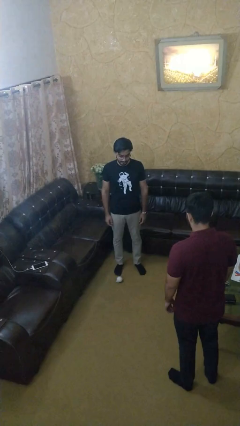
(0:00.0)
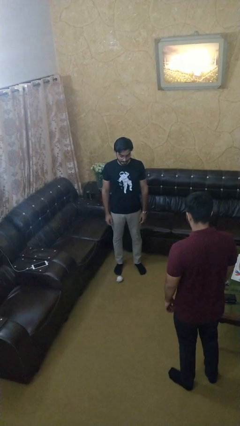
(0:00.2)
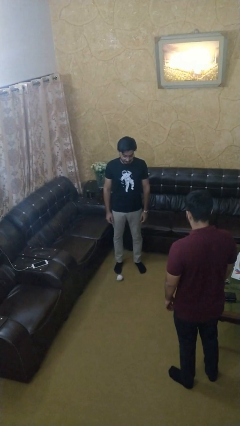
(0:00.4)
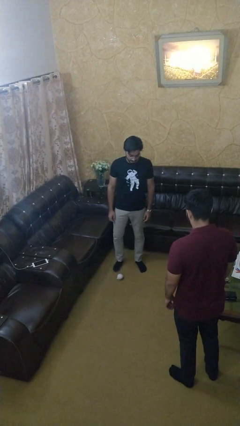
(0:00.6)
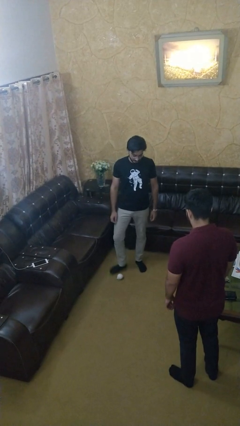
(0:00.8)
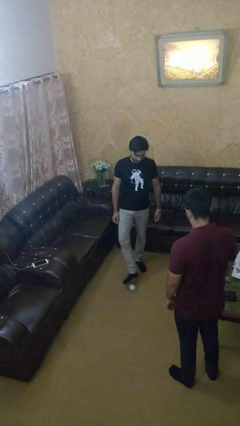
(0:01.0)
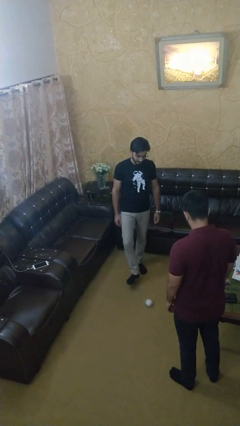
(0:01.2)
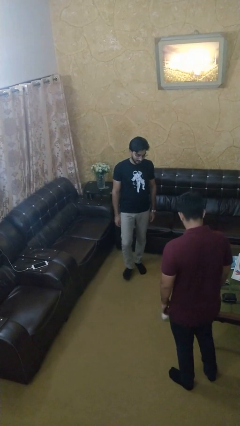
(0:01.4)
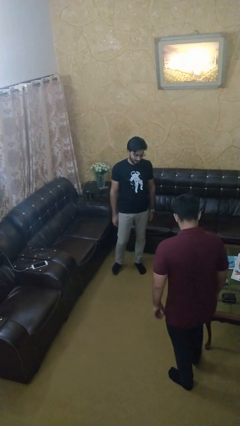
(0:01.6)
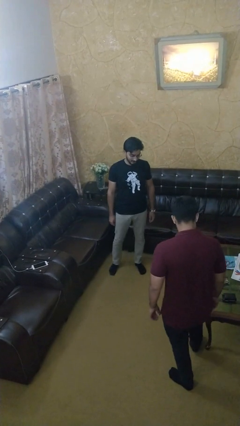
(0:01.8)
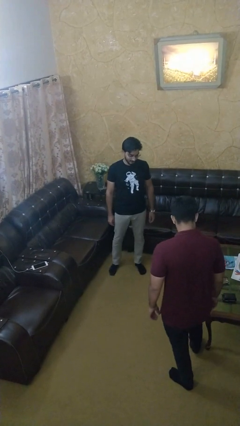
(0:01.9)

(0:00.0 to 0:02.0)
person kicks object to person

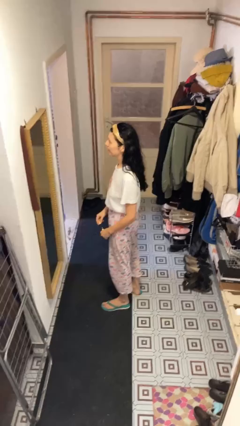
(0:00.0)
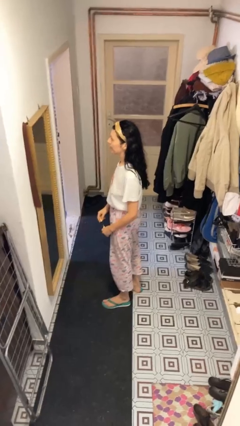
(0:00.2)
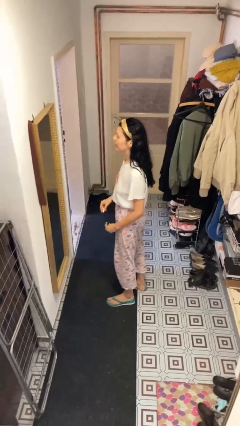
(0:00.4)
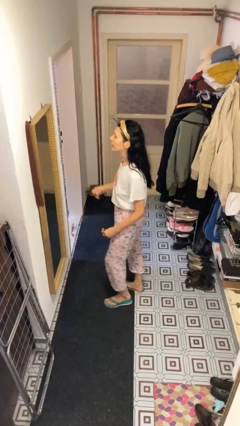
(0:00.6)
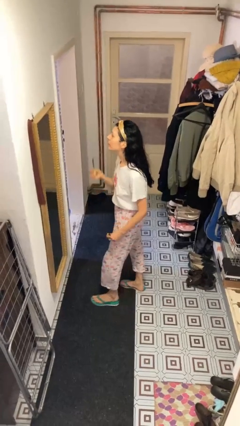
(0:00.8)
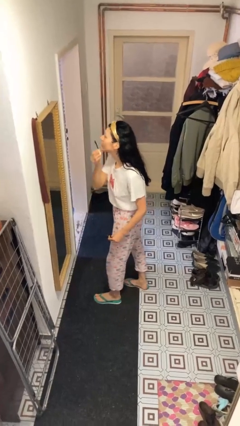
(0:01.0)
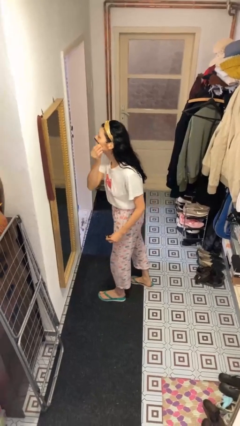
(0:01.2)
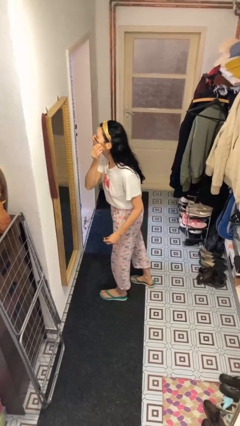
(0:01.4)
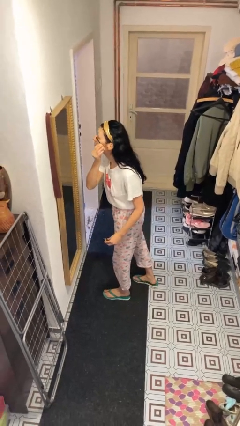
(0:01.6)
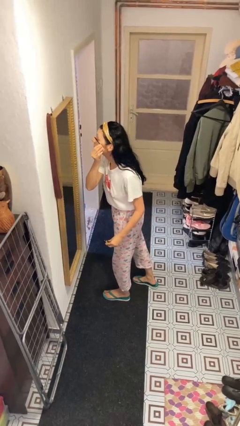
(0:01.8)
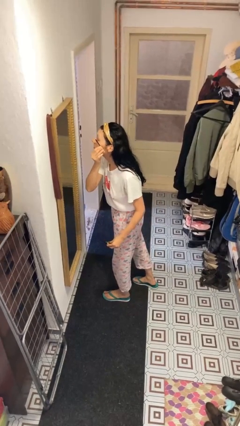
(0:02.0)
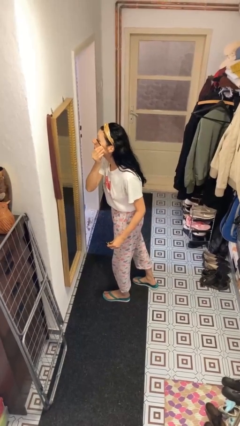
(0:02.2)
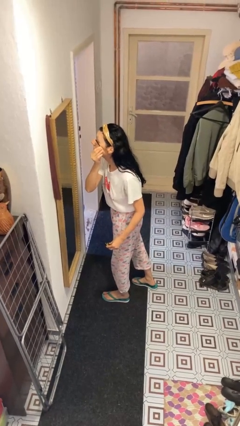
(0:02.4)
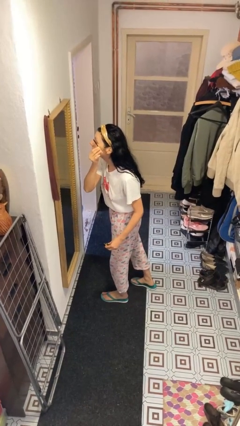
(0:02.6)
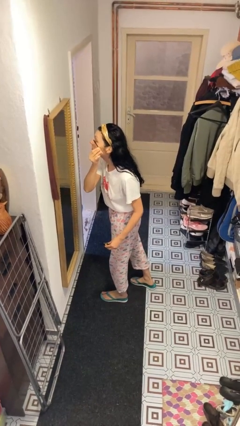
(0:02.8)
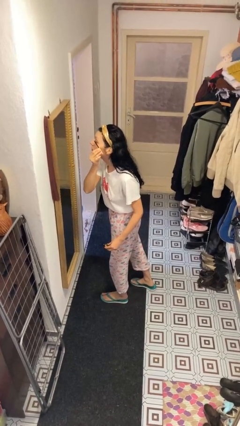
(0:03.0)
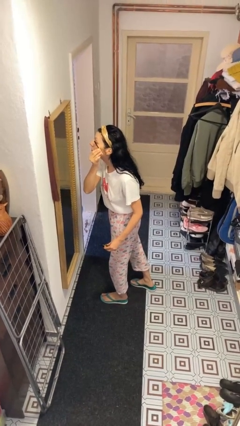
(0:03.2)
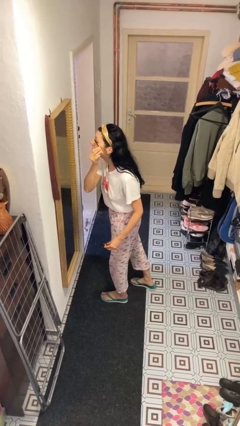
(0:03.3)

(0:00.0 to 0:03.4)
person applies eye makeup

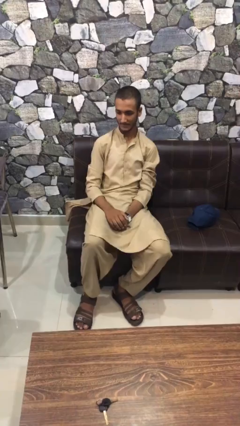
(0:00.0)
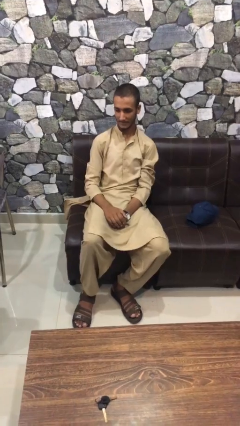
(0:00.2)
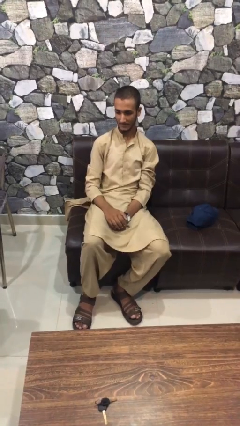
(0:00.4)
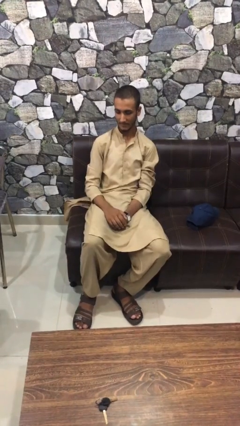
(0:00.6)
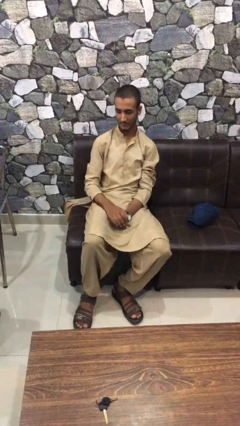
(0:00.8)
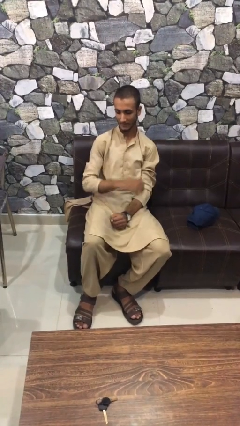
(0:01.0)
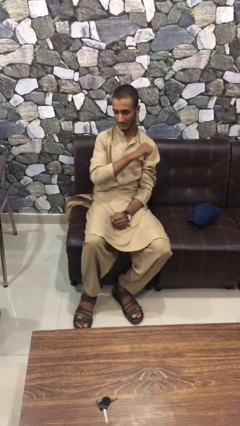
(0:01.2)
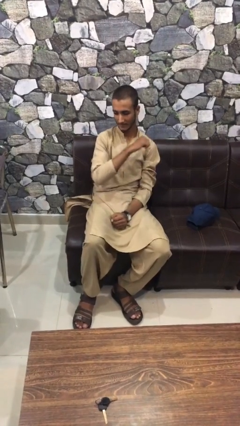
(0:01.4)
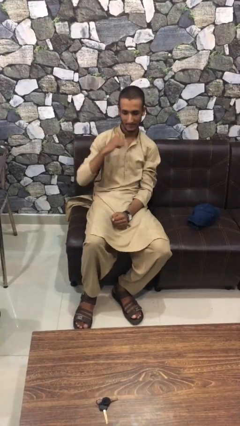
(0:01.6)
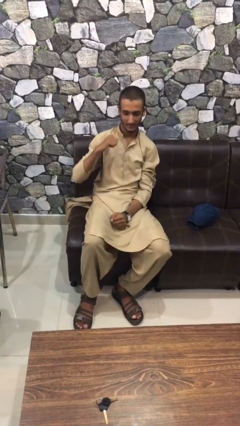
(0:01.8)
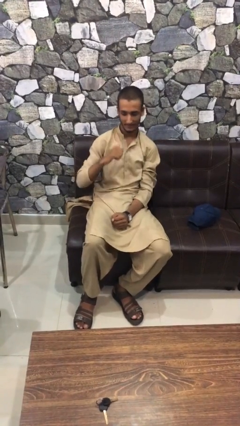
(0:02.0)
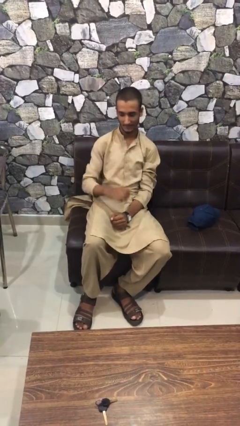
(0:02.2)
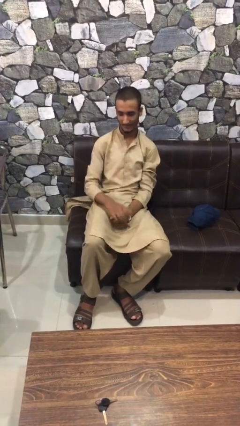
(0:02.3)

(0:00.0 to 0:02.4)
person gestures cut

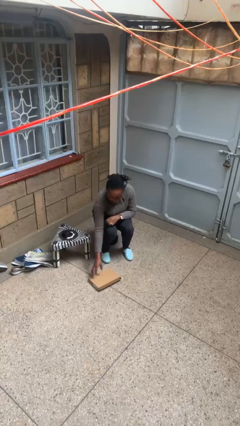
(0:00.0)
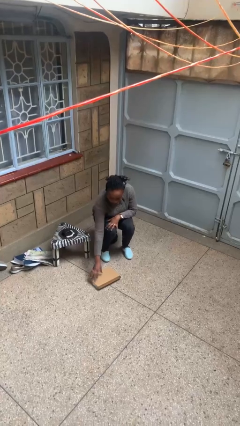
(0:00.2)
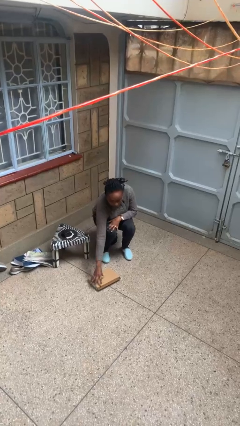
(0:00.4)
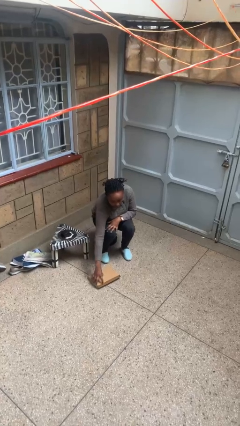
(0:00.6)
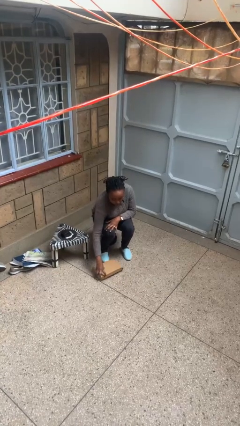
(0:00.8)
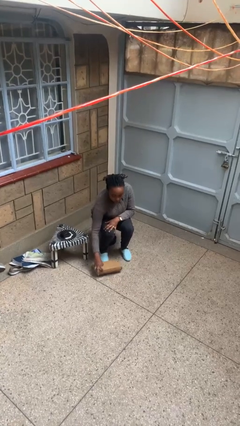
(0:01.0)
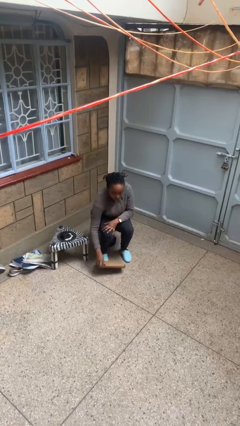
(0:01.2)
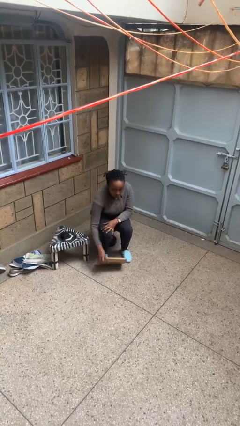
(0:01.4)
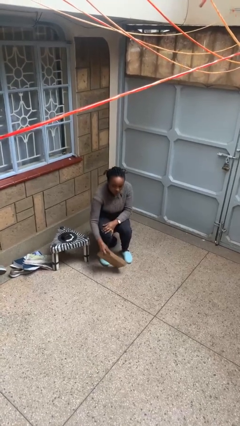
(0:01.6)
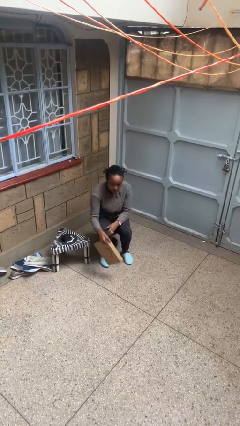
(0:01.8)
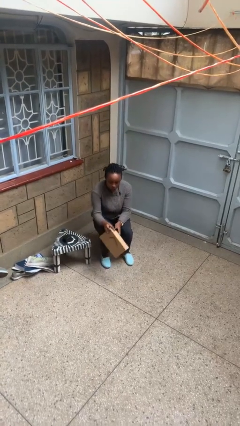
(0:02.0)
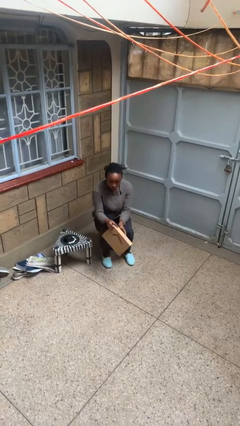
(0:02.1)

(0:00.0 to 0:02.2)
person picks up object from floor

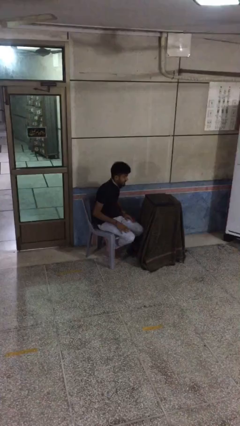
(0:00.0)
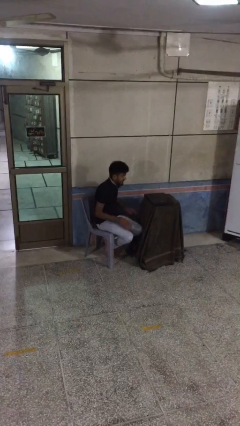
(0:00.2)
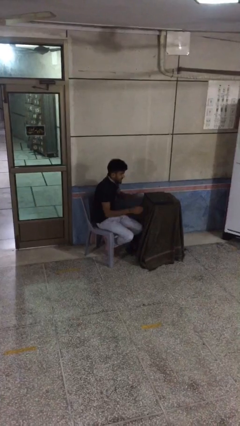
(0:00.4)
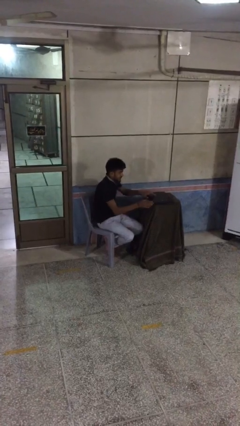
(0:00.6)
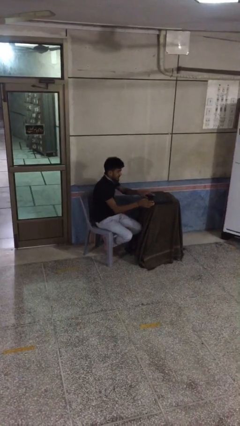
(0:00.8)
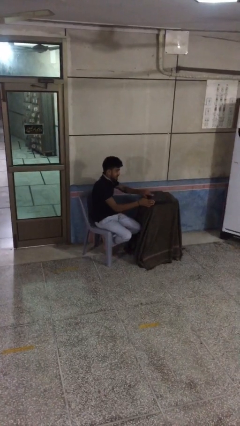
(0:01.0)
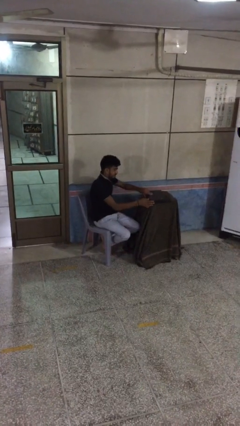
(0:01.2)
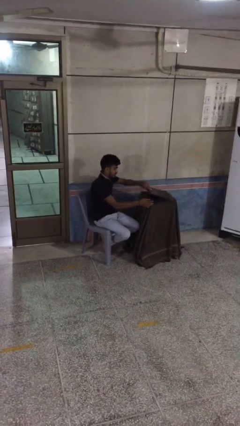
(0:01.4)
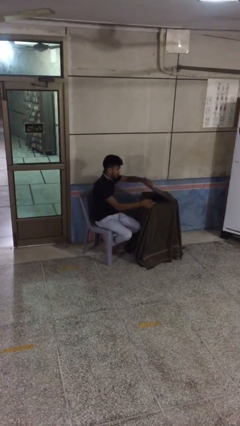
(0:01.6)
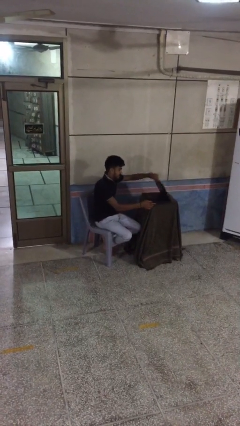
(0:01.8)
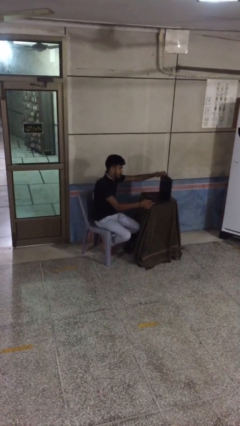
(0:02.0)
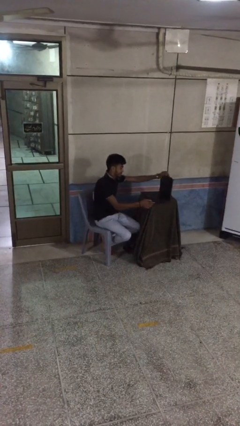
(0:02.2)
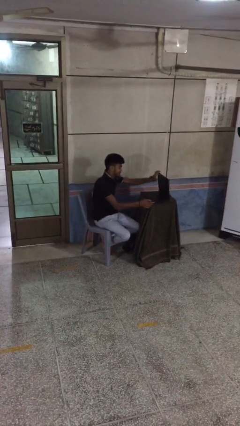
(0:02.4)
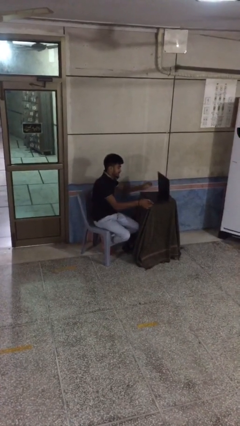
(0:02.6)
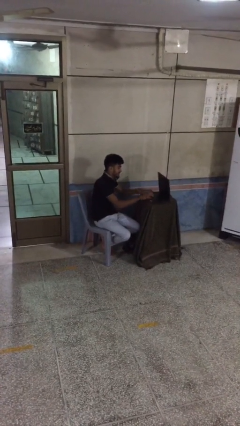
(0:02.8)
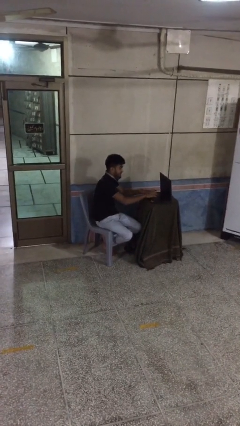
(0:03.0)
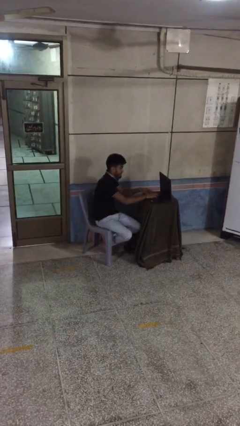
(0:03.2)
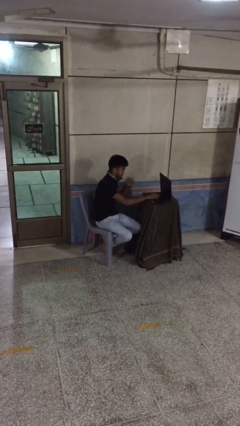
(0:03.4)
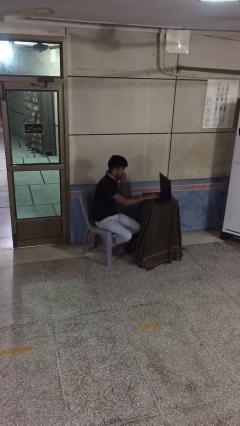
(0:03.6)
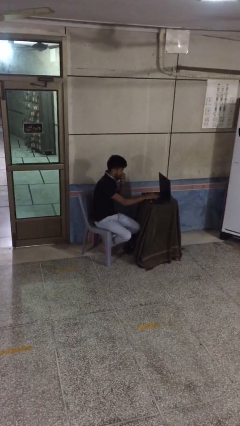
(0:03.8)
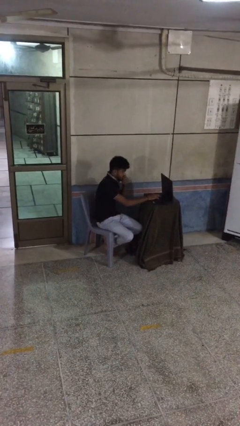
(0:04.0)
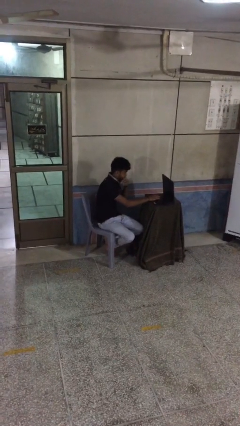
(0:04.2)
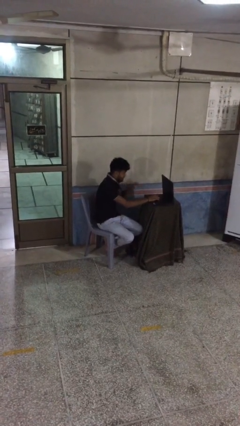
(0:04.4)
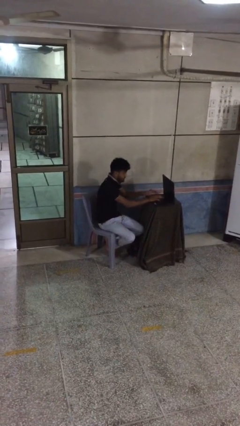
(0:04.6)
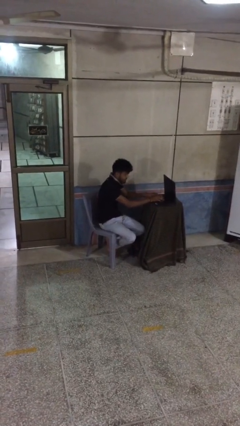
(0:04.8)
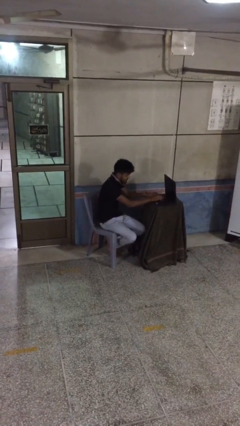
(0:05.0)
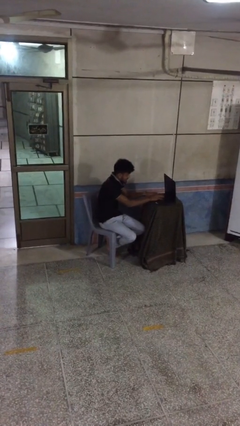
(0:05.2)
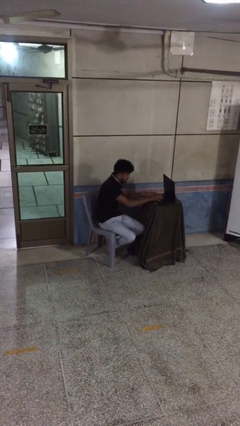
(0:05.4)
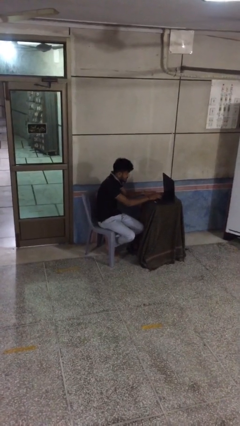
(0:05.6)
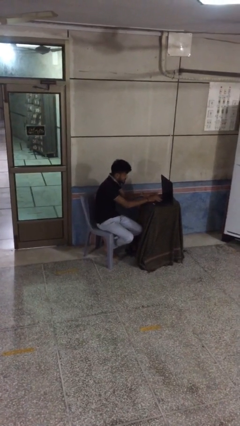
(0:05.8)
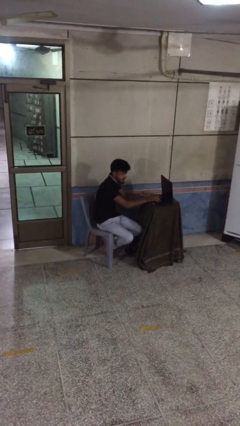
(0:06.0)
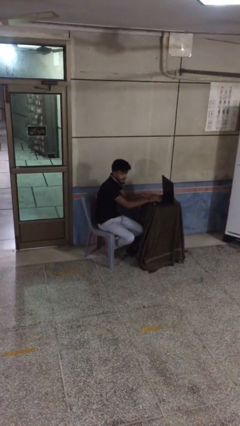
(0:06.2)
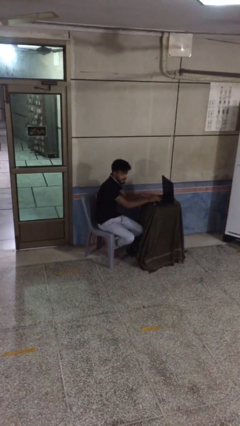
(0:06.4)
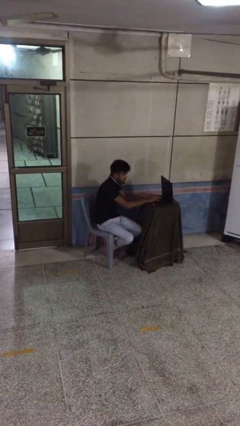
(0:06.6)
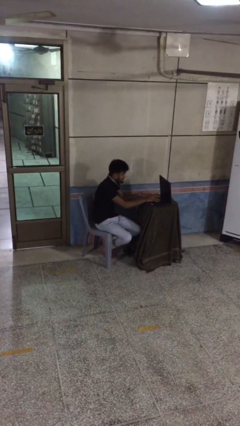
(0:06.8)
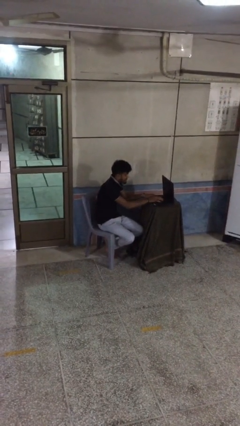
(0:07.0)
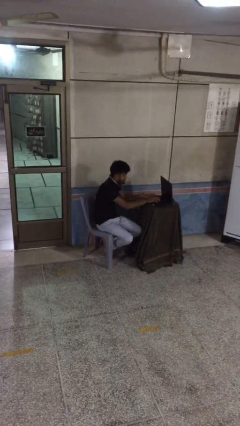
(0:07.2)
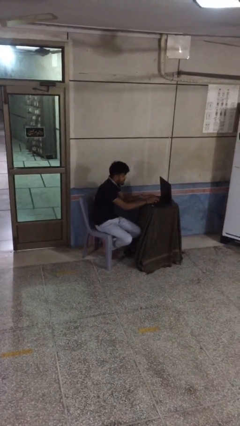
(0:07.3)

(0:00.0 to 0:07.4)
person interacts with laptop
